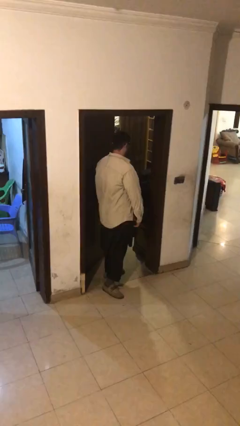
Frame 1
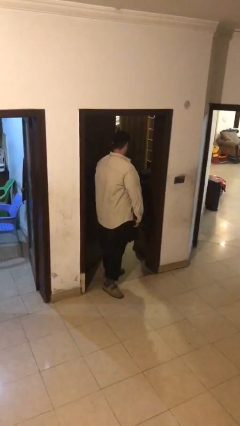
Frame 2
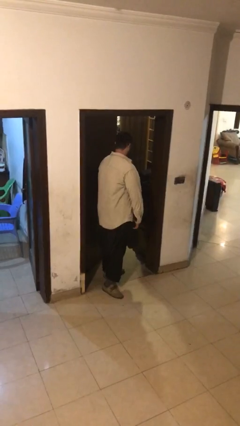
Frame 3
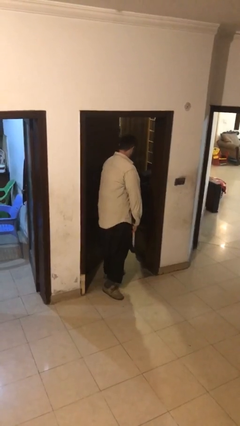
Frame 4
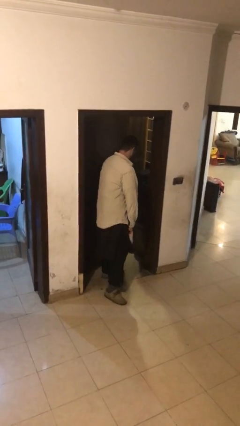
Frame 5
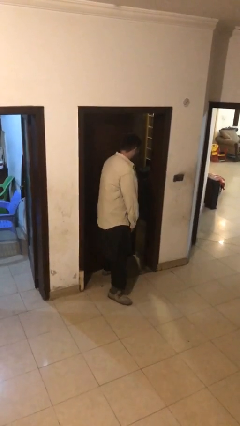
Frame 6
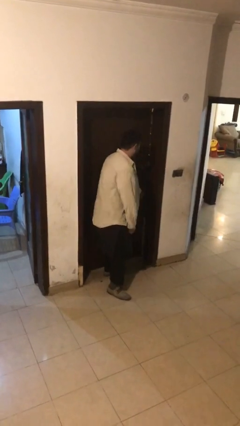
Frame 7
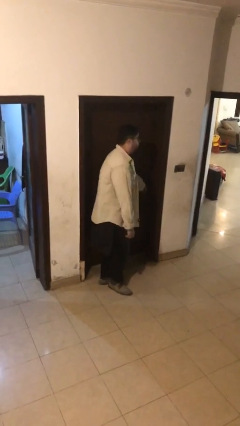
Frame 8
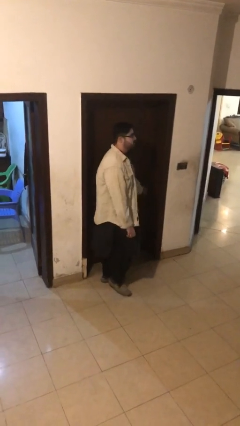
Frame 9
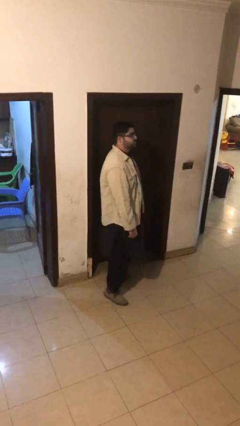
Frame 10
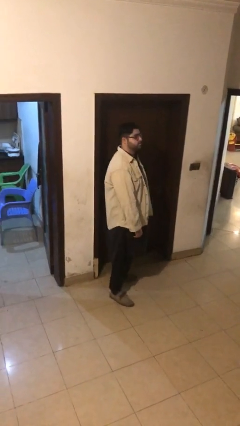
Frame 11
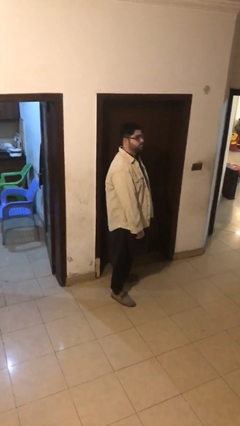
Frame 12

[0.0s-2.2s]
person closes facility door

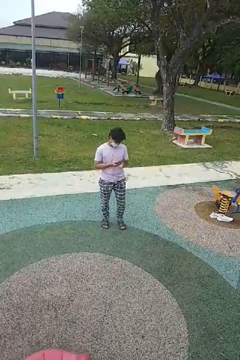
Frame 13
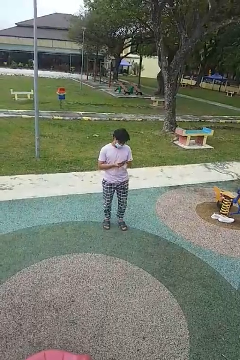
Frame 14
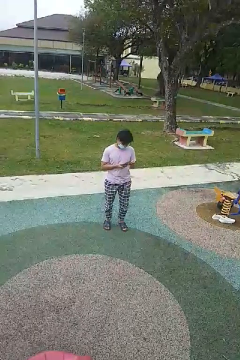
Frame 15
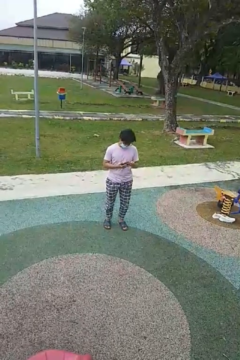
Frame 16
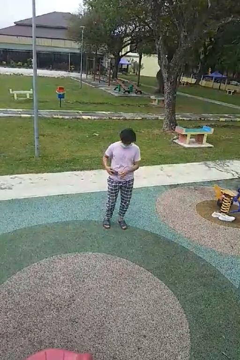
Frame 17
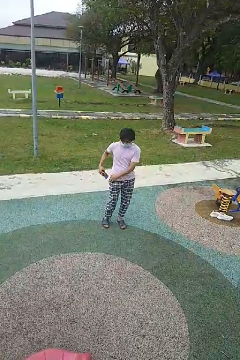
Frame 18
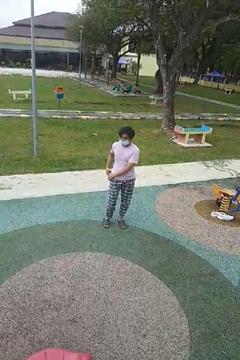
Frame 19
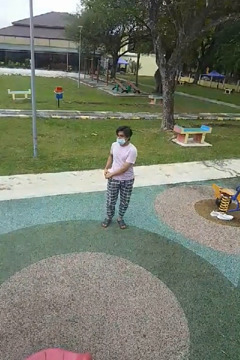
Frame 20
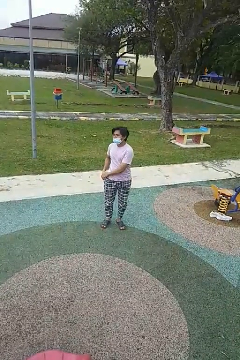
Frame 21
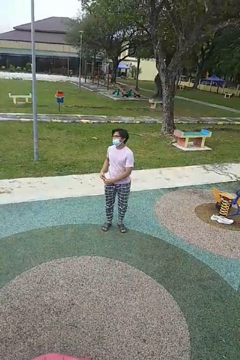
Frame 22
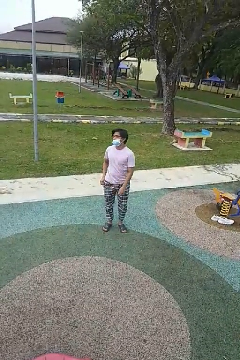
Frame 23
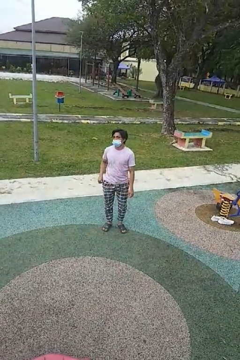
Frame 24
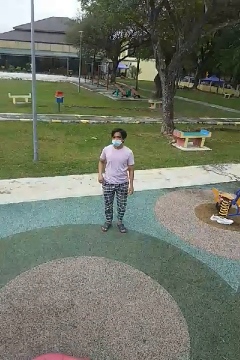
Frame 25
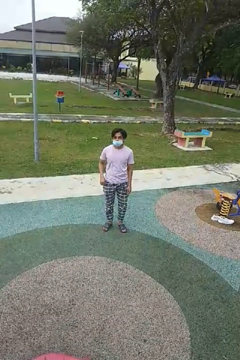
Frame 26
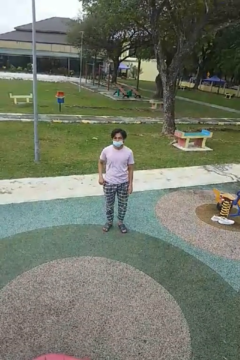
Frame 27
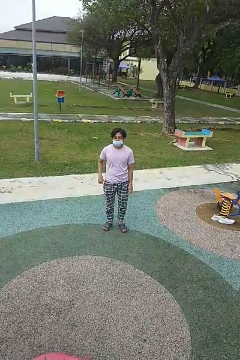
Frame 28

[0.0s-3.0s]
person puts phone into pocket

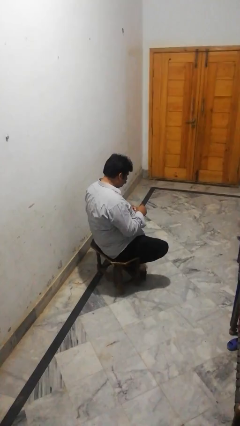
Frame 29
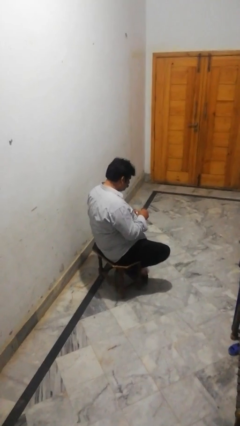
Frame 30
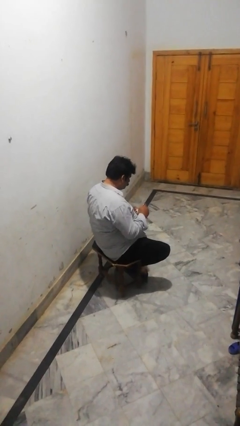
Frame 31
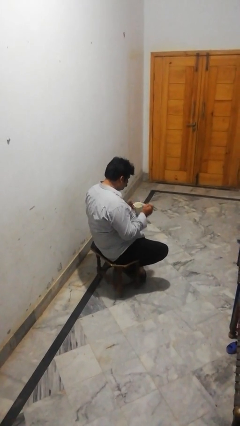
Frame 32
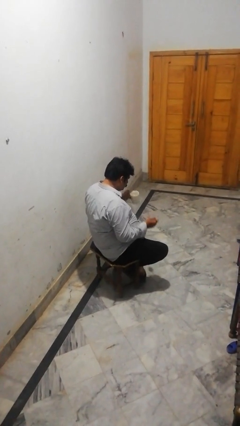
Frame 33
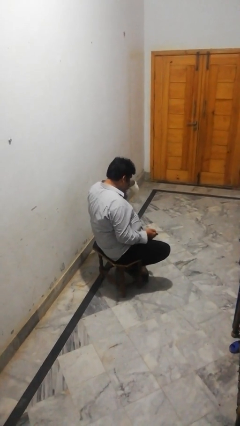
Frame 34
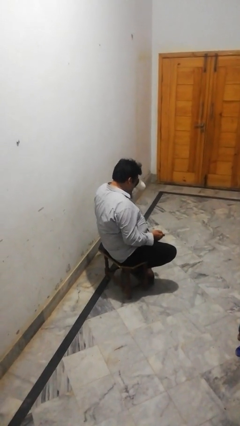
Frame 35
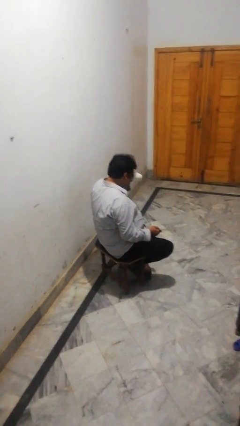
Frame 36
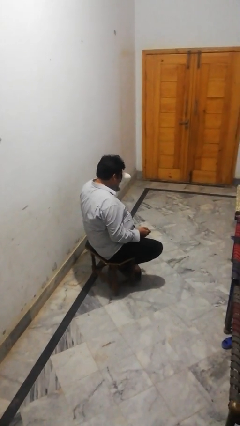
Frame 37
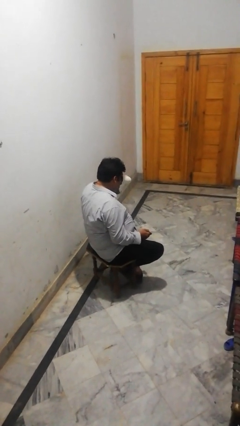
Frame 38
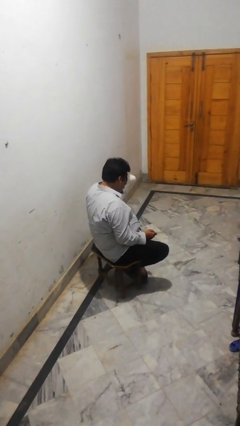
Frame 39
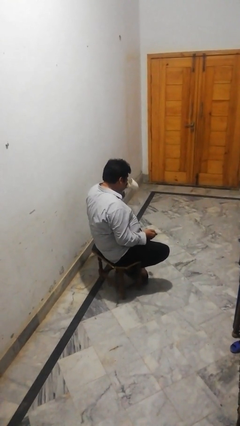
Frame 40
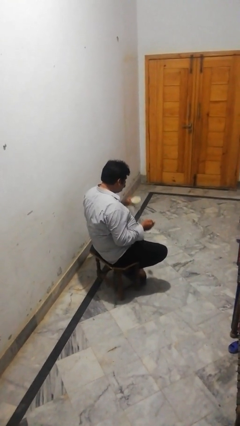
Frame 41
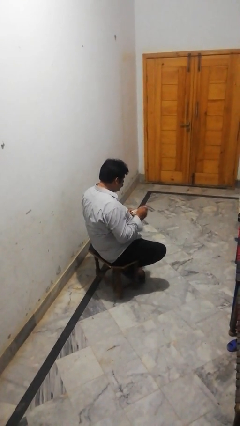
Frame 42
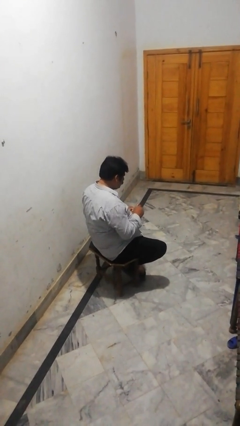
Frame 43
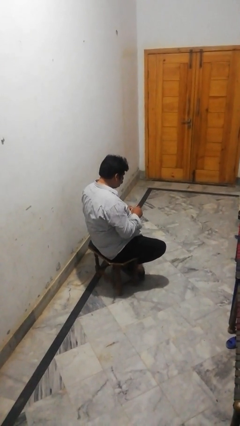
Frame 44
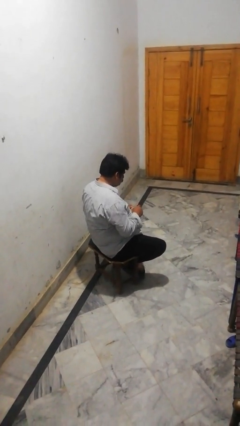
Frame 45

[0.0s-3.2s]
person drinks from mug

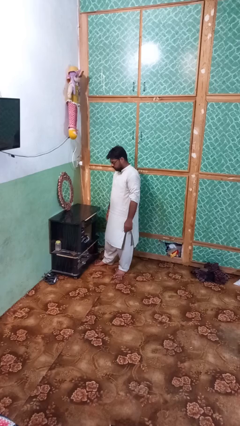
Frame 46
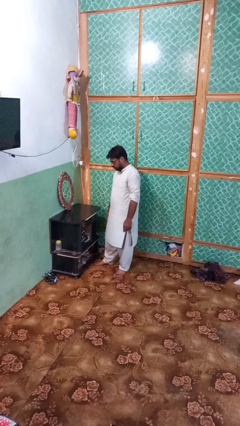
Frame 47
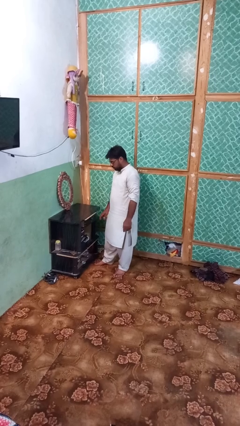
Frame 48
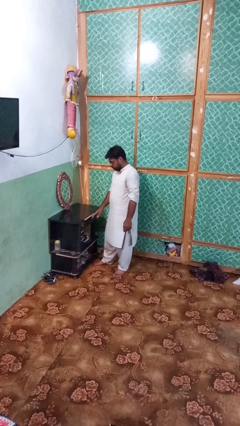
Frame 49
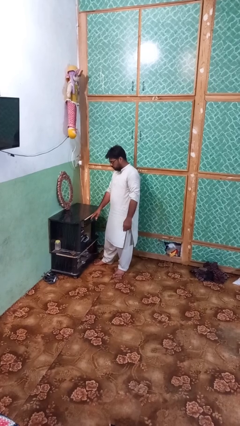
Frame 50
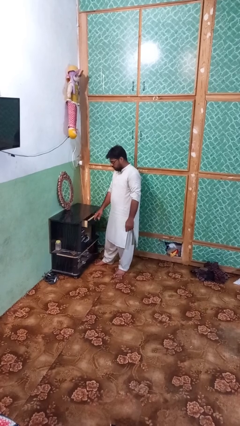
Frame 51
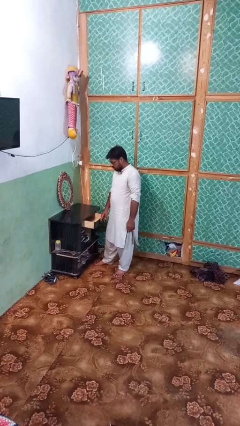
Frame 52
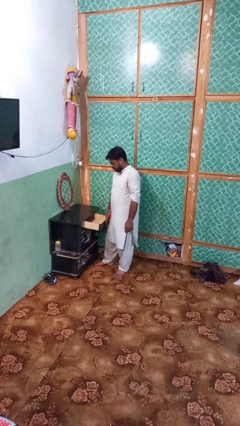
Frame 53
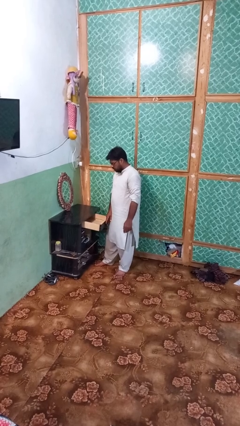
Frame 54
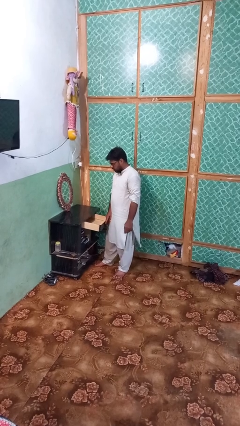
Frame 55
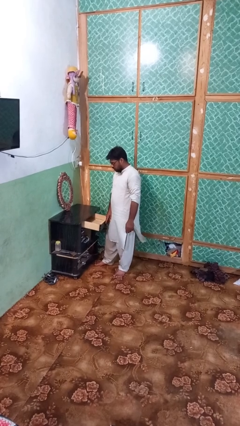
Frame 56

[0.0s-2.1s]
person opens dresser drawer

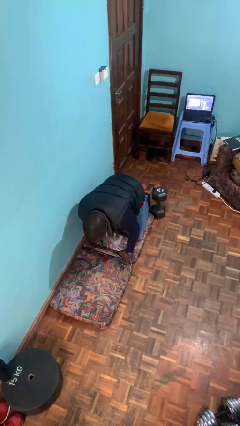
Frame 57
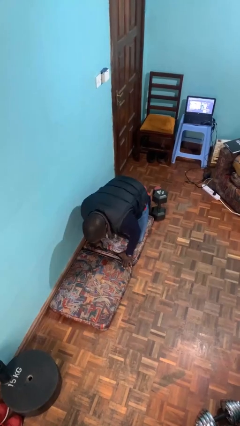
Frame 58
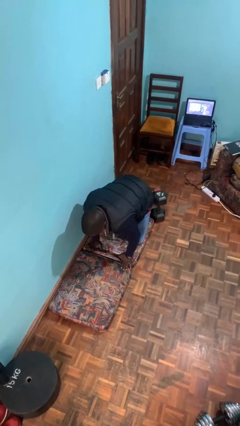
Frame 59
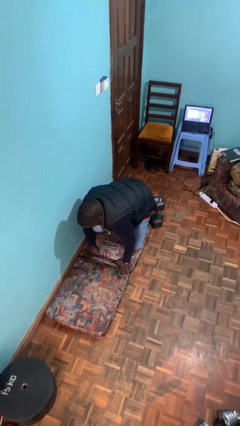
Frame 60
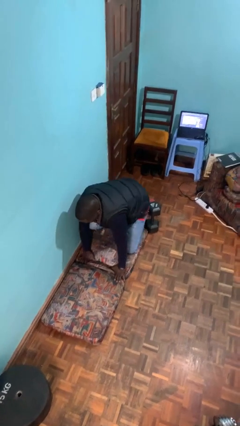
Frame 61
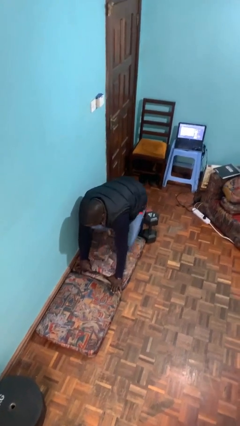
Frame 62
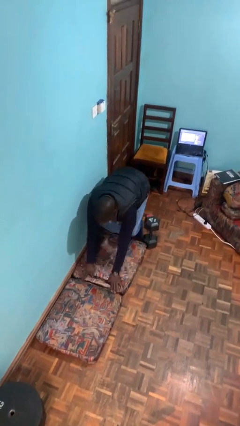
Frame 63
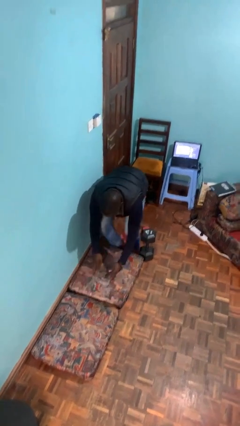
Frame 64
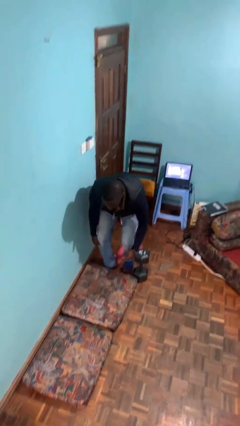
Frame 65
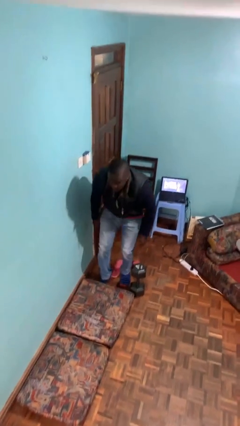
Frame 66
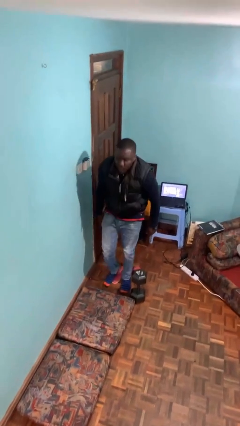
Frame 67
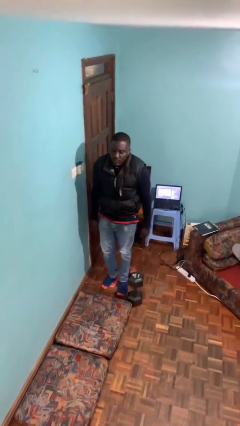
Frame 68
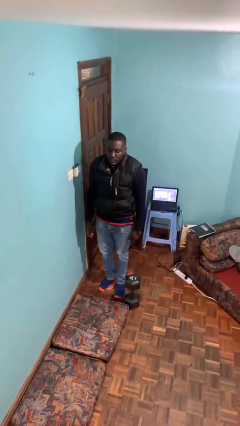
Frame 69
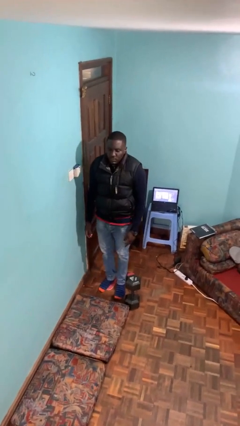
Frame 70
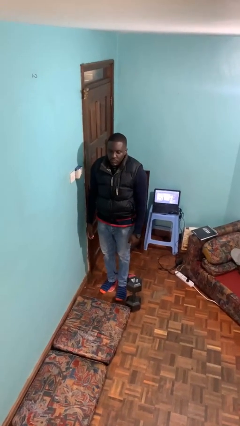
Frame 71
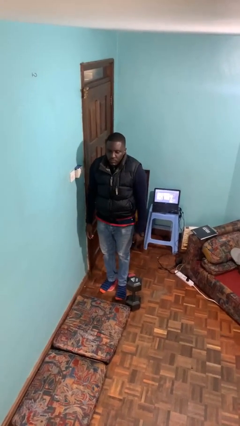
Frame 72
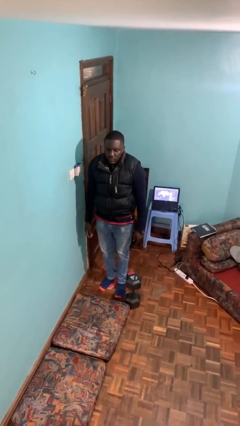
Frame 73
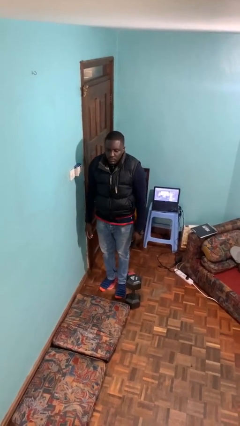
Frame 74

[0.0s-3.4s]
person stands up from floor

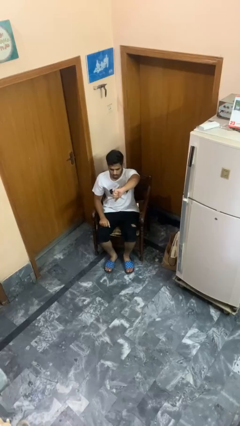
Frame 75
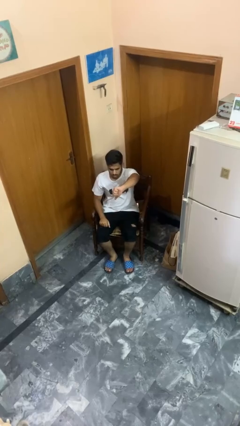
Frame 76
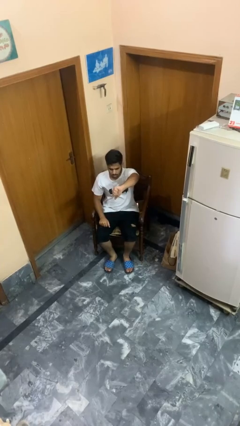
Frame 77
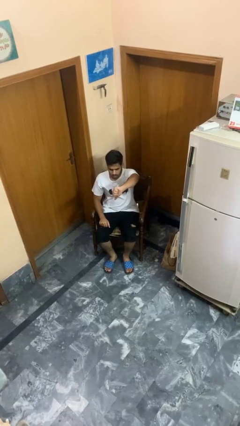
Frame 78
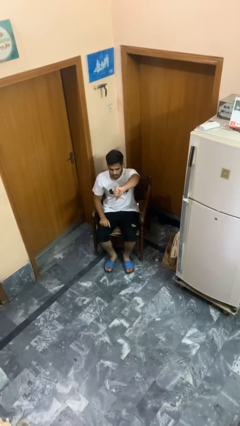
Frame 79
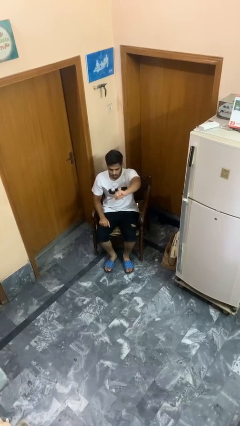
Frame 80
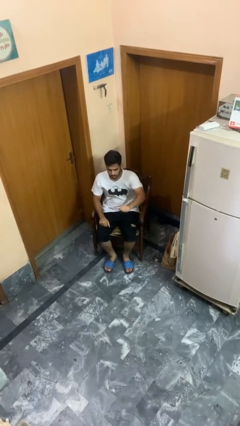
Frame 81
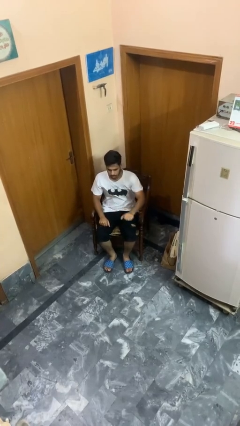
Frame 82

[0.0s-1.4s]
person gestures thumbs down

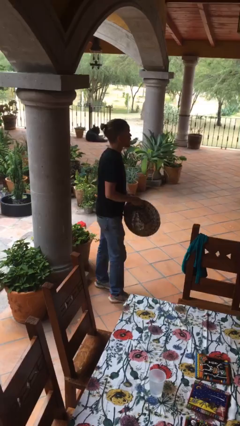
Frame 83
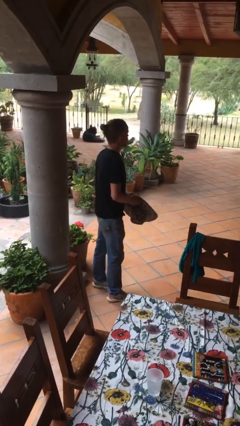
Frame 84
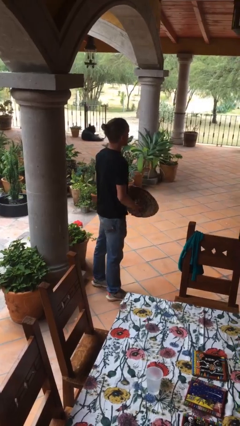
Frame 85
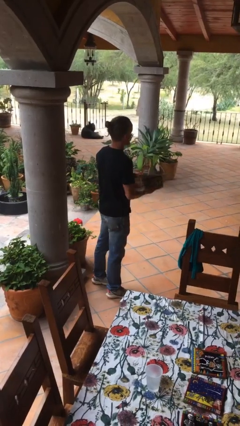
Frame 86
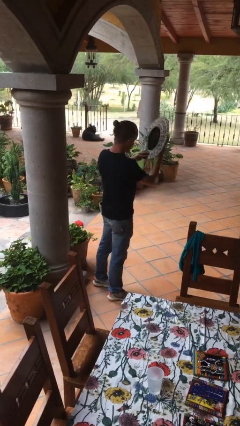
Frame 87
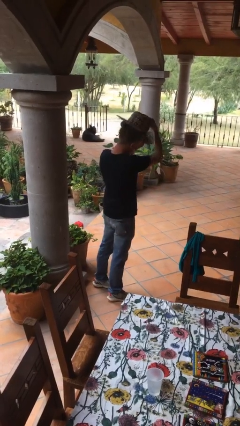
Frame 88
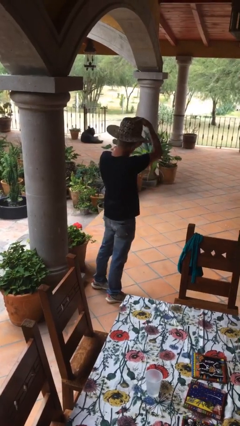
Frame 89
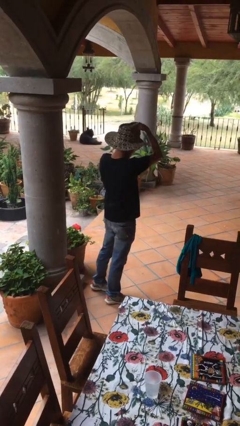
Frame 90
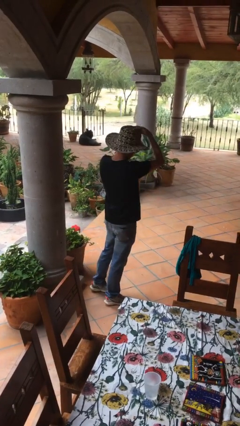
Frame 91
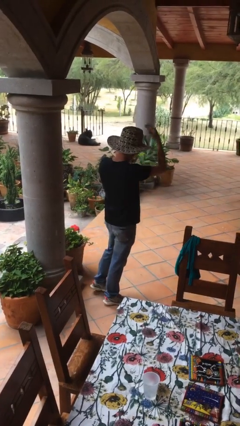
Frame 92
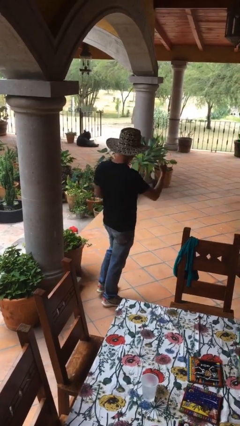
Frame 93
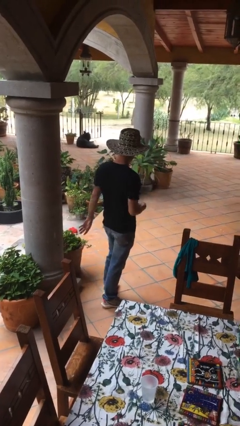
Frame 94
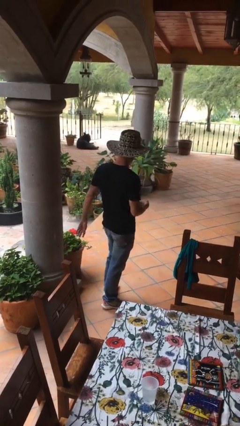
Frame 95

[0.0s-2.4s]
person puts on hat

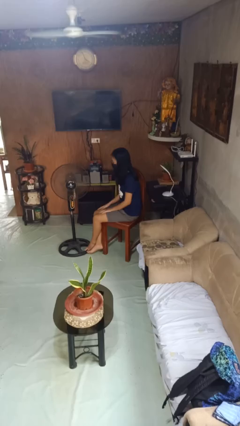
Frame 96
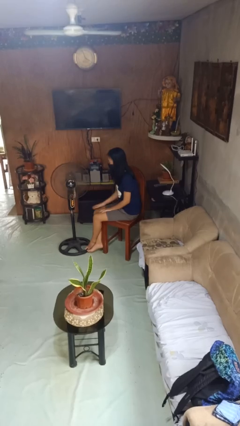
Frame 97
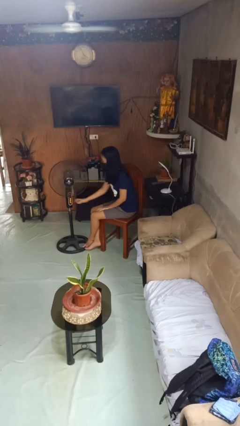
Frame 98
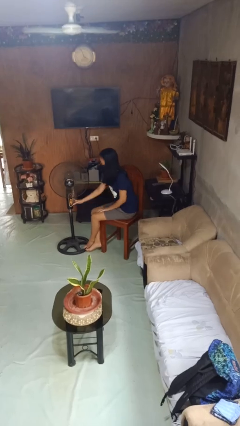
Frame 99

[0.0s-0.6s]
person turns off fan
